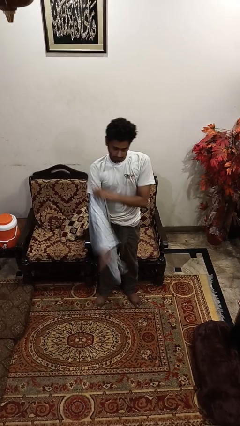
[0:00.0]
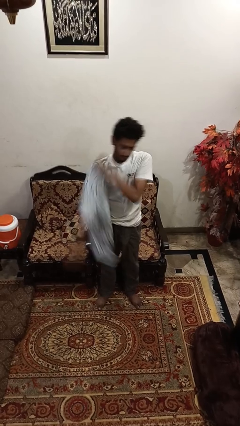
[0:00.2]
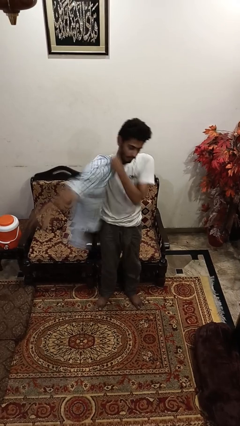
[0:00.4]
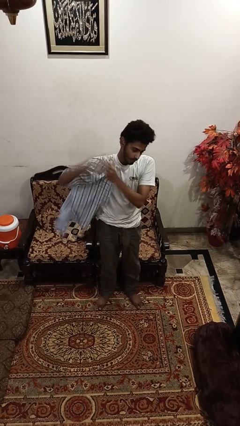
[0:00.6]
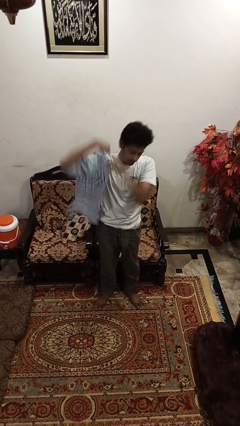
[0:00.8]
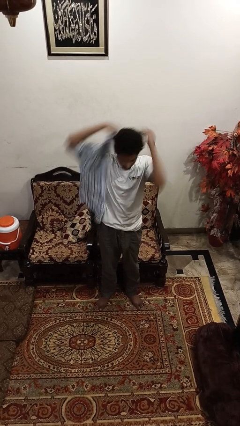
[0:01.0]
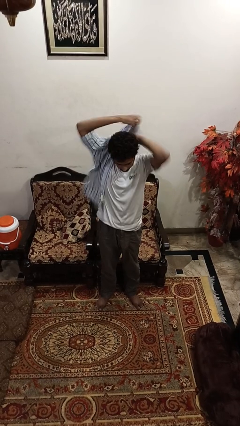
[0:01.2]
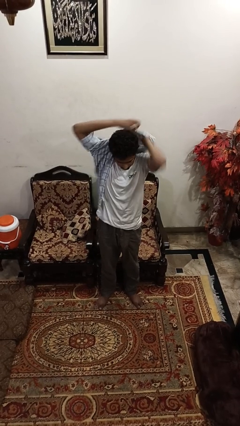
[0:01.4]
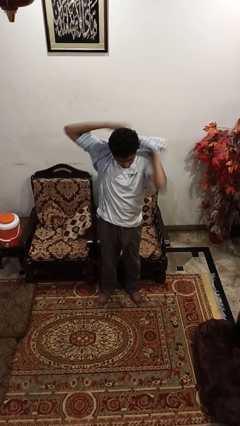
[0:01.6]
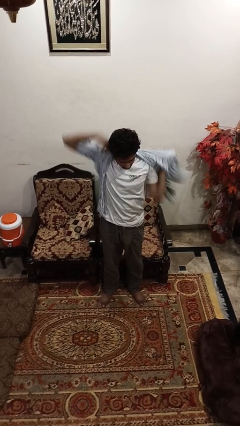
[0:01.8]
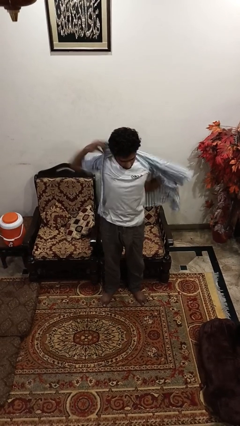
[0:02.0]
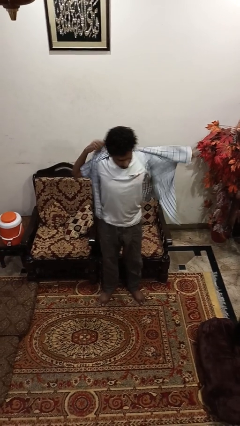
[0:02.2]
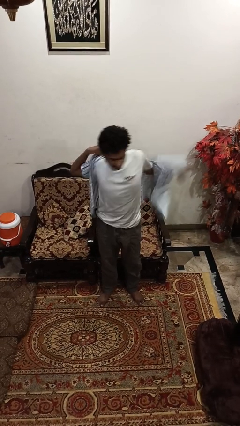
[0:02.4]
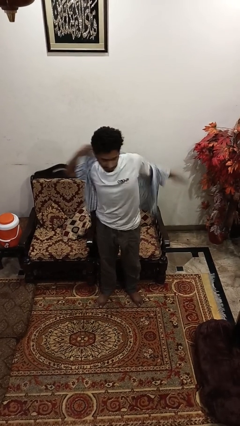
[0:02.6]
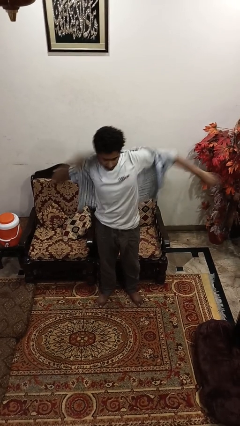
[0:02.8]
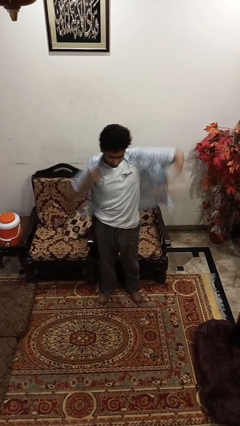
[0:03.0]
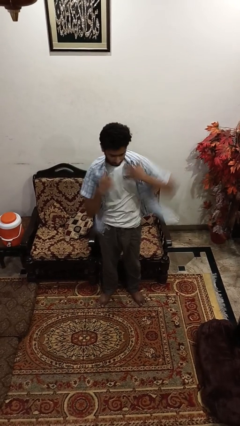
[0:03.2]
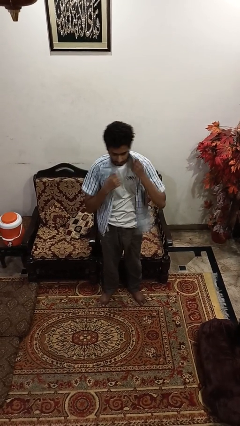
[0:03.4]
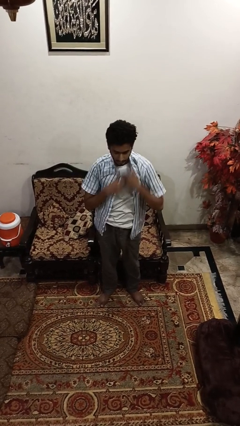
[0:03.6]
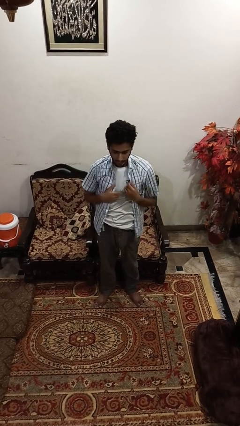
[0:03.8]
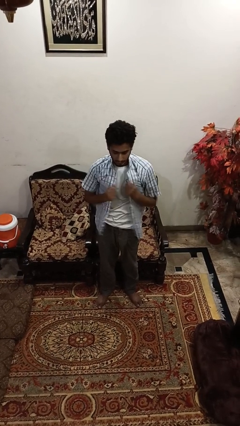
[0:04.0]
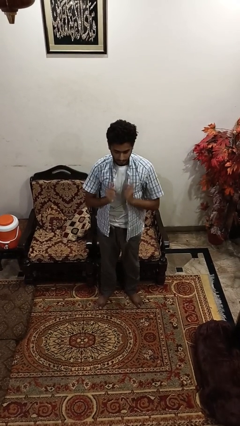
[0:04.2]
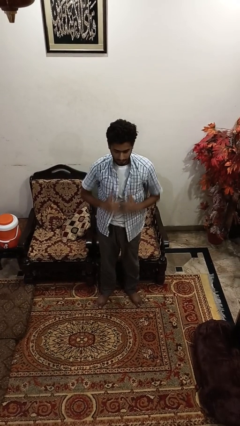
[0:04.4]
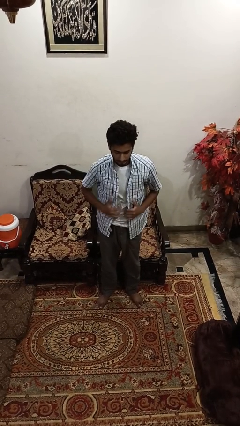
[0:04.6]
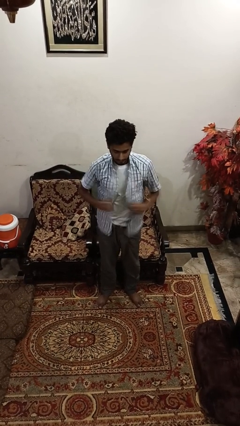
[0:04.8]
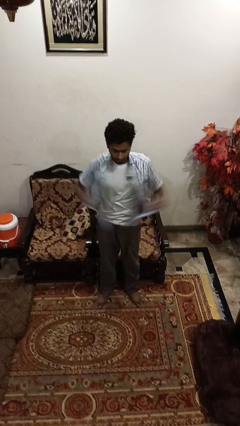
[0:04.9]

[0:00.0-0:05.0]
person puts on shirt

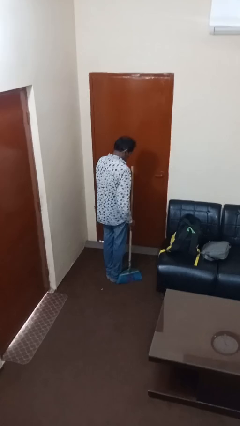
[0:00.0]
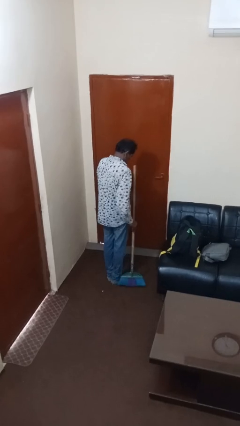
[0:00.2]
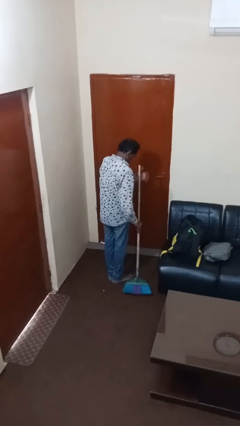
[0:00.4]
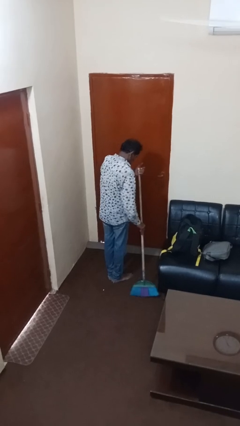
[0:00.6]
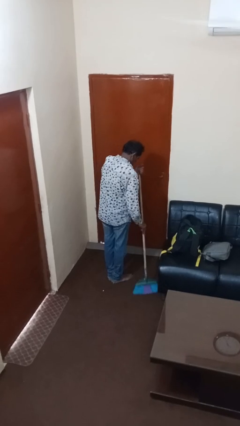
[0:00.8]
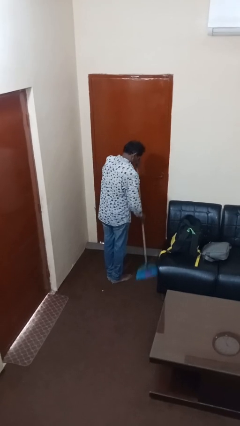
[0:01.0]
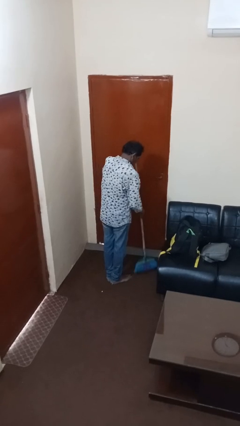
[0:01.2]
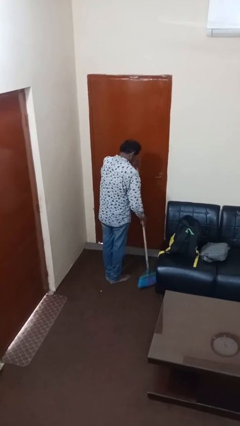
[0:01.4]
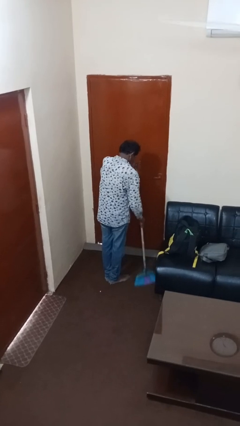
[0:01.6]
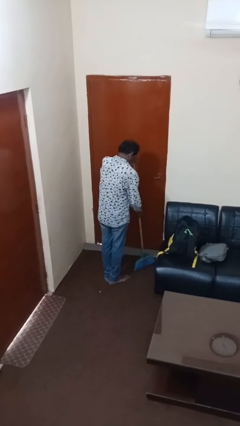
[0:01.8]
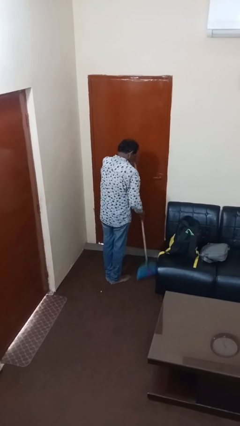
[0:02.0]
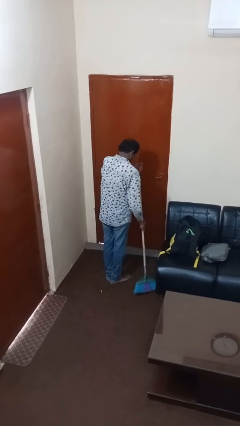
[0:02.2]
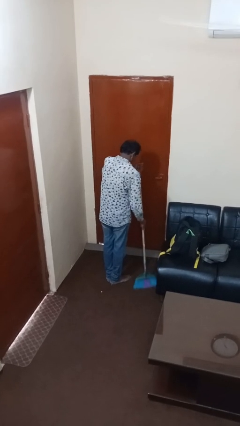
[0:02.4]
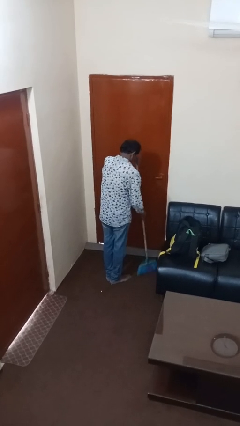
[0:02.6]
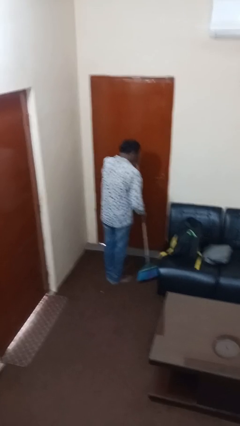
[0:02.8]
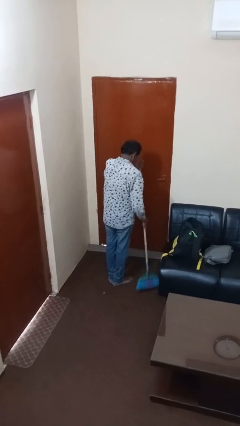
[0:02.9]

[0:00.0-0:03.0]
person sweeps floor

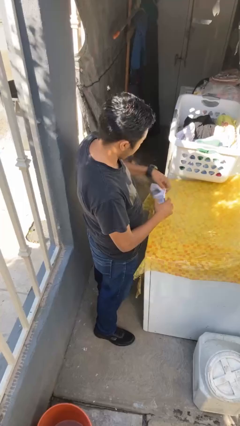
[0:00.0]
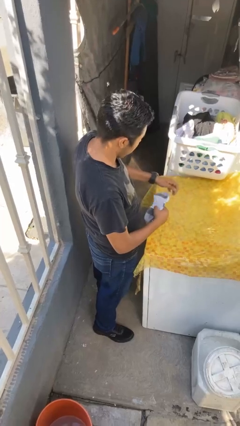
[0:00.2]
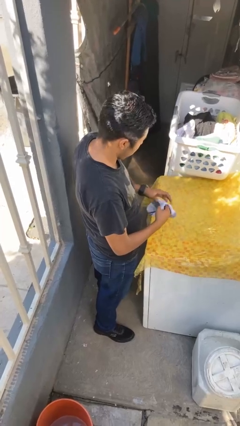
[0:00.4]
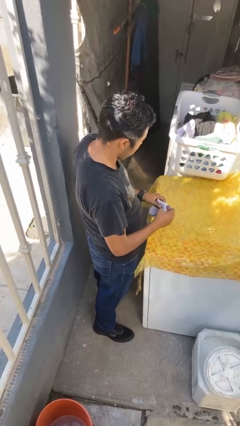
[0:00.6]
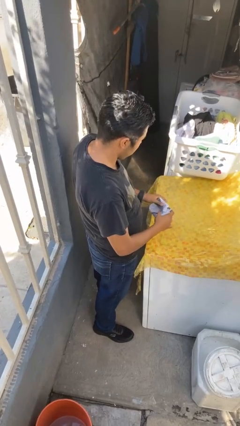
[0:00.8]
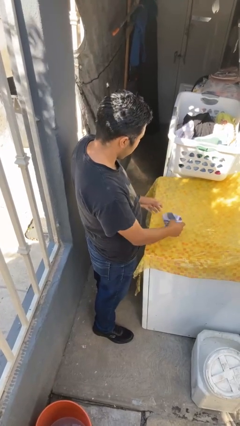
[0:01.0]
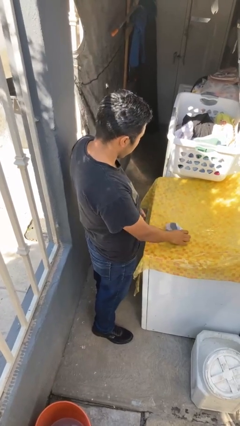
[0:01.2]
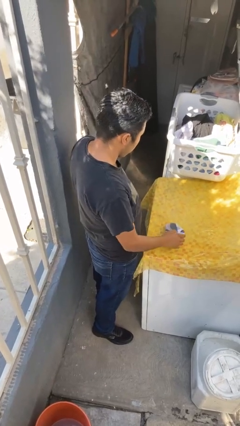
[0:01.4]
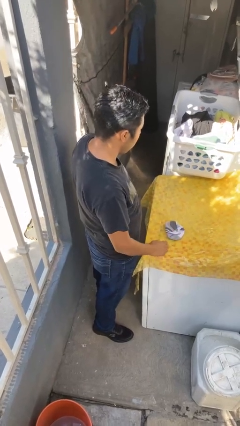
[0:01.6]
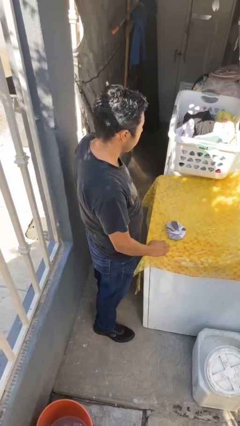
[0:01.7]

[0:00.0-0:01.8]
person folds socks

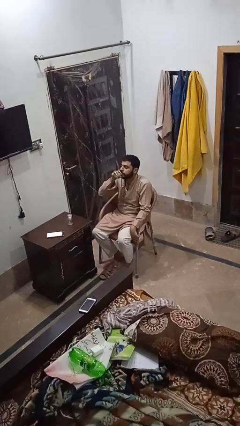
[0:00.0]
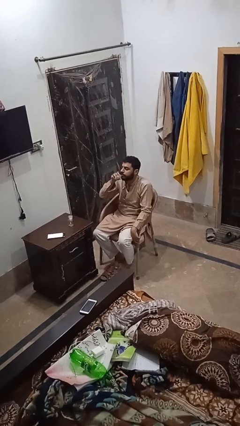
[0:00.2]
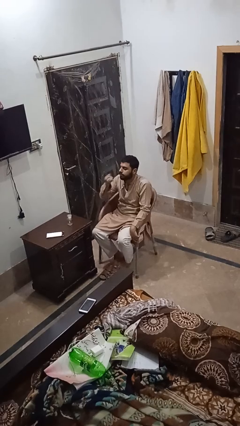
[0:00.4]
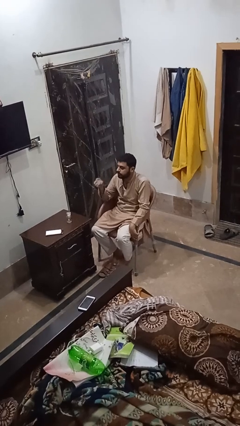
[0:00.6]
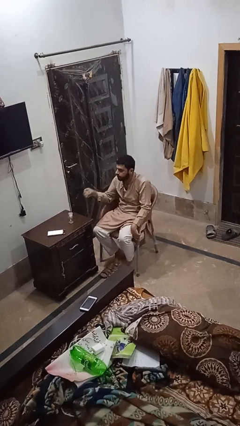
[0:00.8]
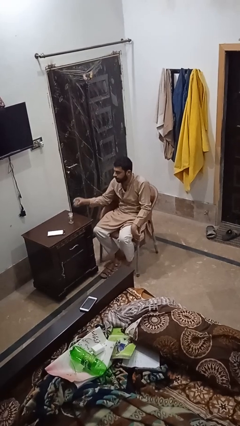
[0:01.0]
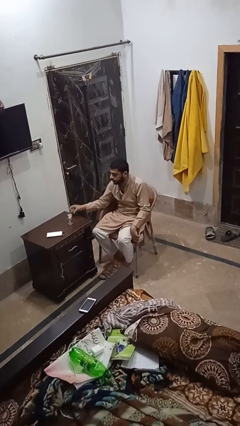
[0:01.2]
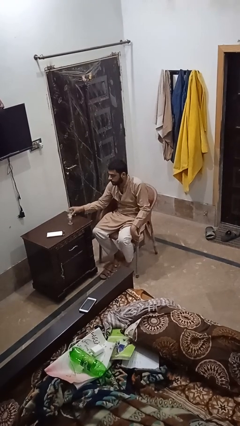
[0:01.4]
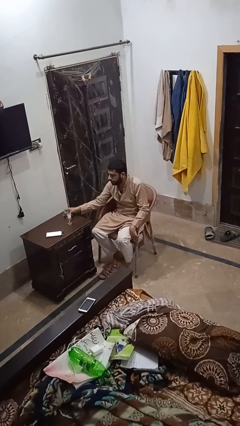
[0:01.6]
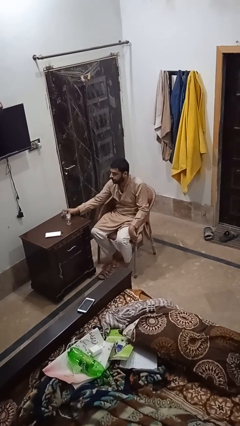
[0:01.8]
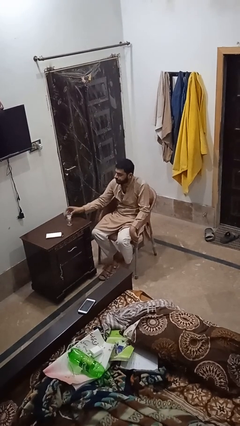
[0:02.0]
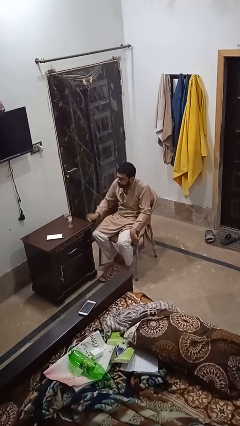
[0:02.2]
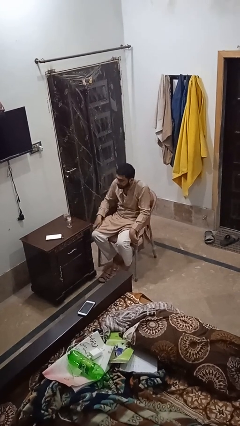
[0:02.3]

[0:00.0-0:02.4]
person puts down object on table

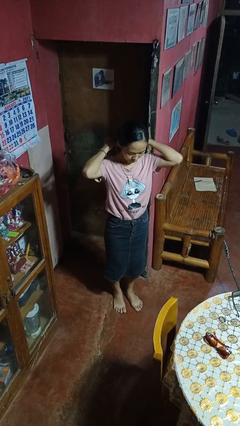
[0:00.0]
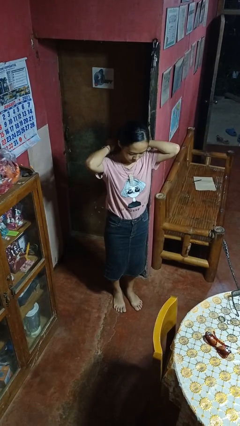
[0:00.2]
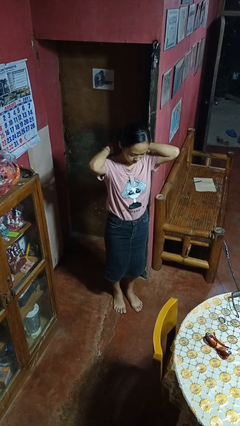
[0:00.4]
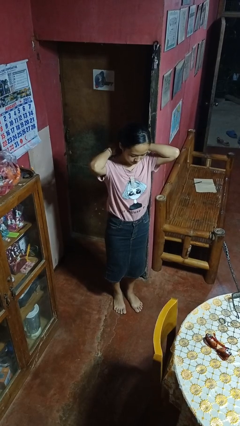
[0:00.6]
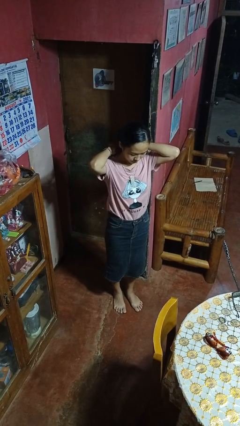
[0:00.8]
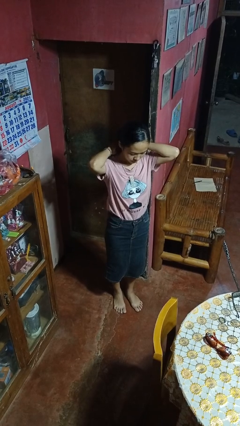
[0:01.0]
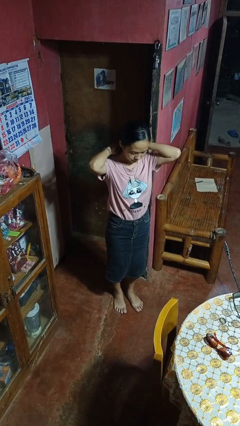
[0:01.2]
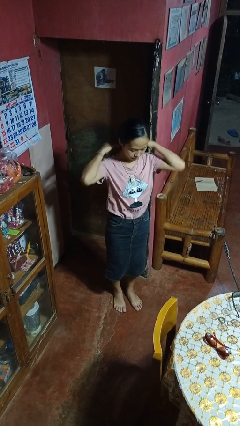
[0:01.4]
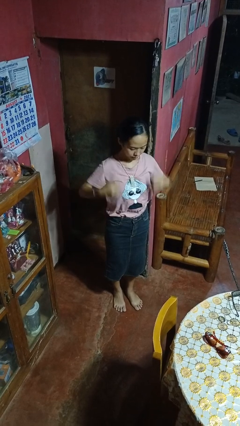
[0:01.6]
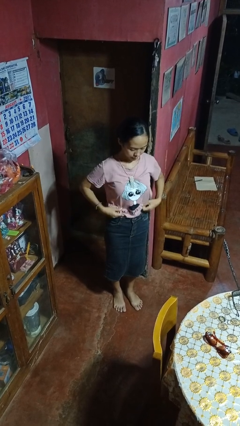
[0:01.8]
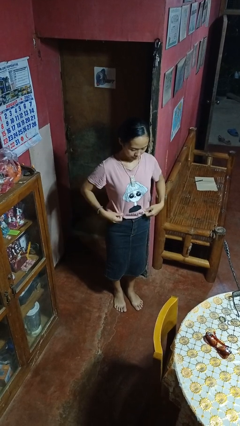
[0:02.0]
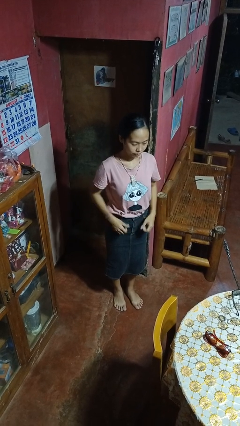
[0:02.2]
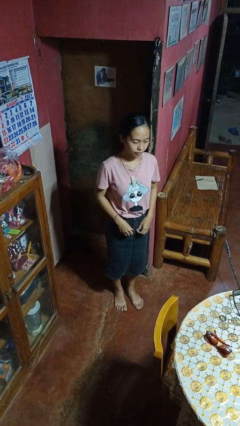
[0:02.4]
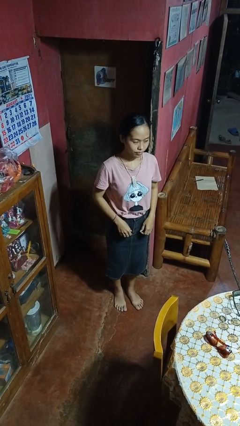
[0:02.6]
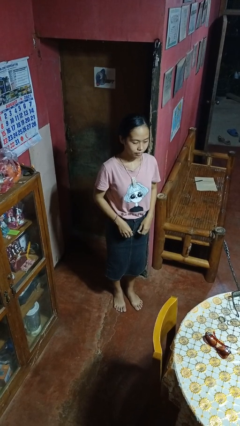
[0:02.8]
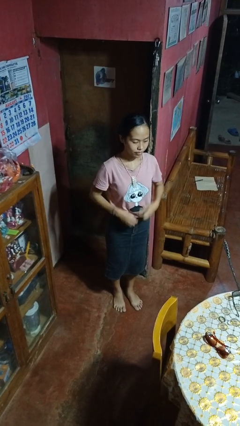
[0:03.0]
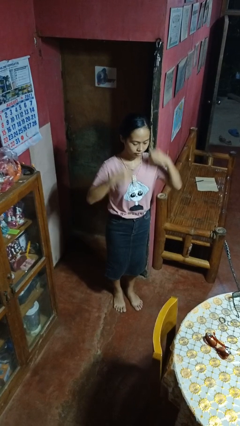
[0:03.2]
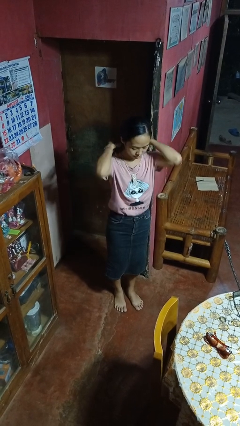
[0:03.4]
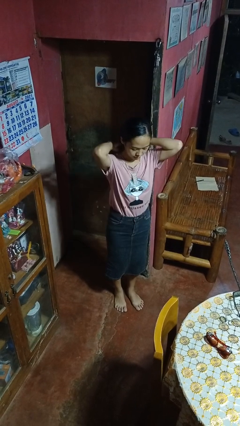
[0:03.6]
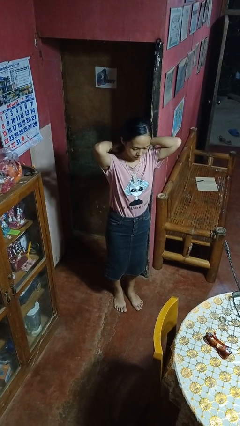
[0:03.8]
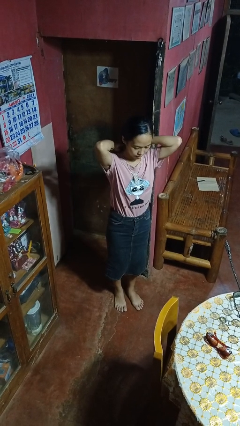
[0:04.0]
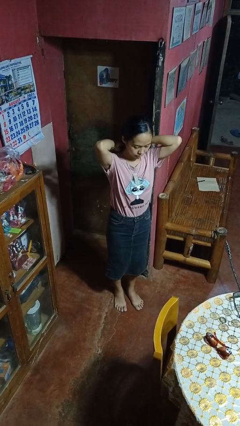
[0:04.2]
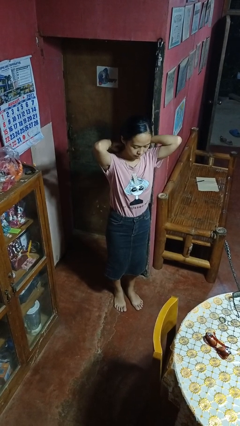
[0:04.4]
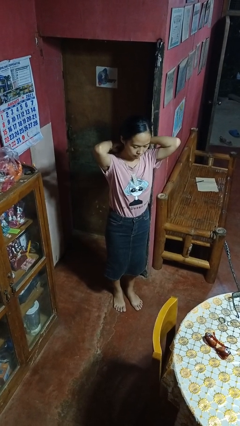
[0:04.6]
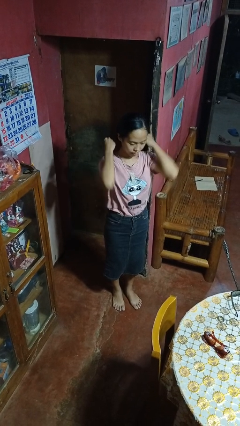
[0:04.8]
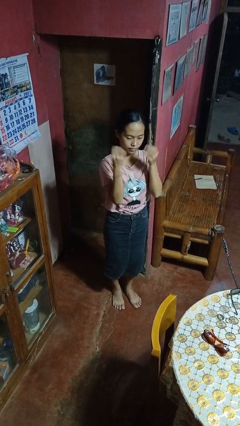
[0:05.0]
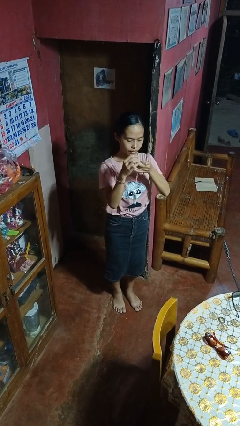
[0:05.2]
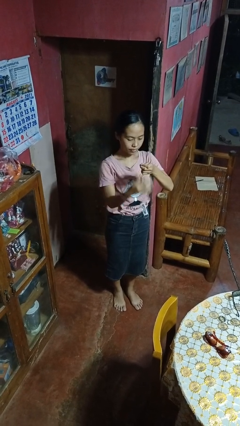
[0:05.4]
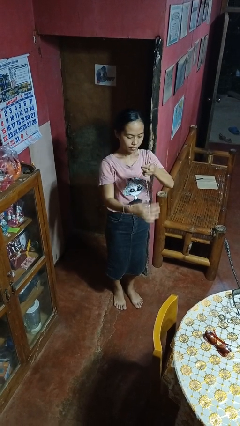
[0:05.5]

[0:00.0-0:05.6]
person puts on necklace
